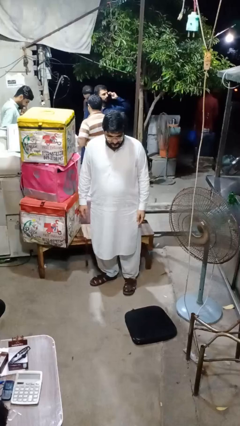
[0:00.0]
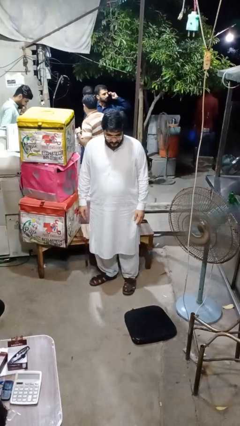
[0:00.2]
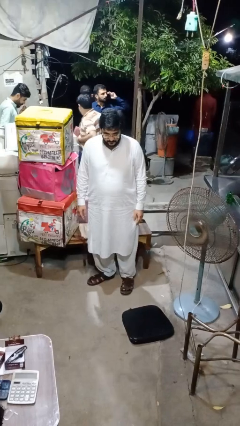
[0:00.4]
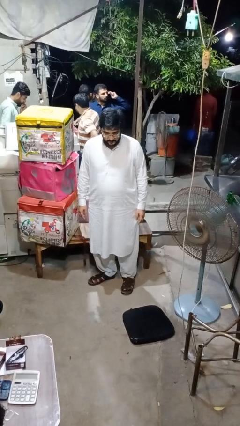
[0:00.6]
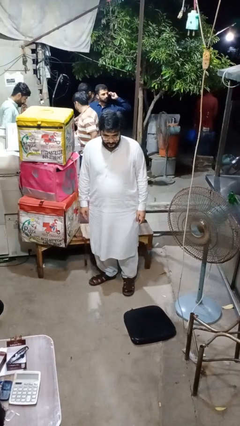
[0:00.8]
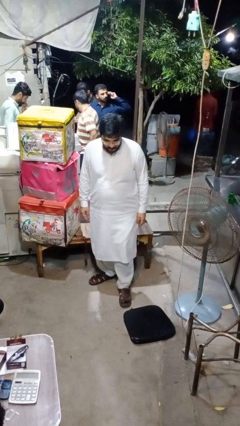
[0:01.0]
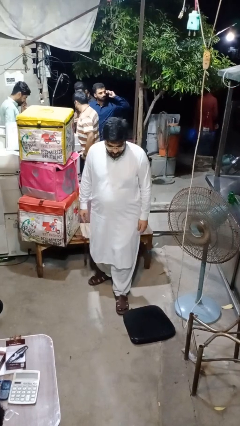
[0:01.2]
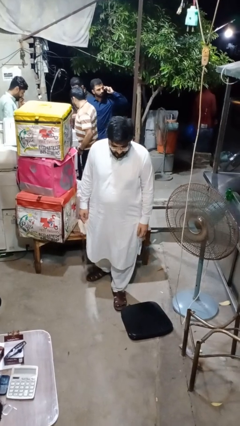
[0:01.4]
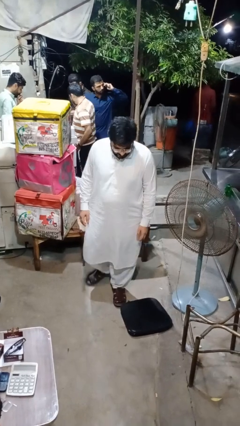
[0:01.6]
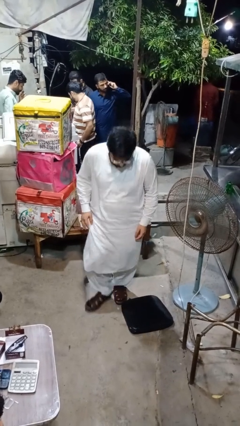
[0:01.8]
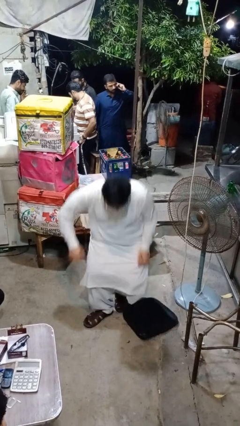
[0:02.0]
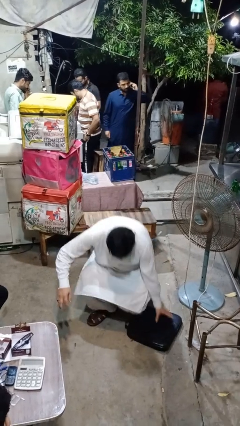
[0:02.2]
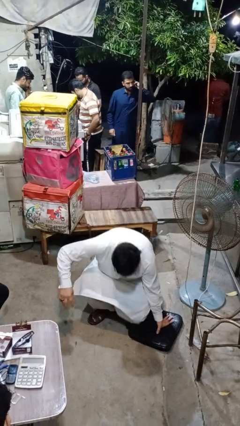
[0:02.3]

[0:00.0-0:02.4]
person trips on object on floor

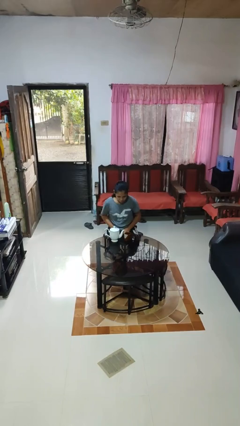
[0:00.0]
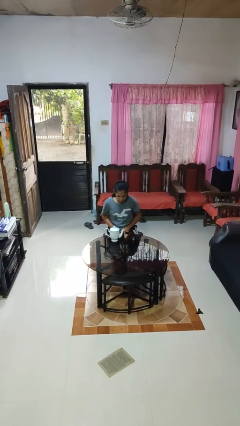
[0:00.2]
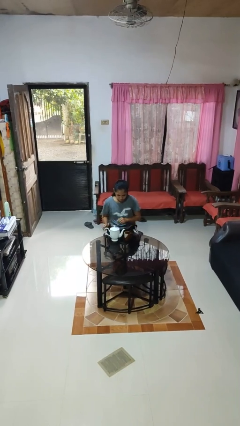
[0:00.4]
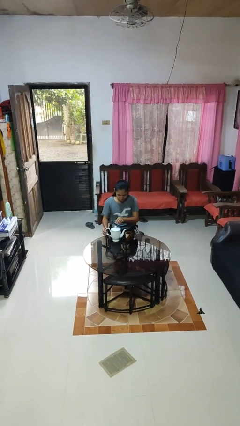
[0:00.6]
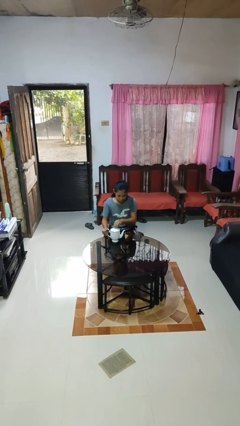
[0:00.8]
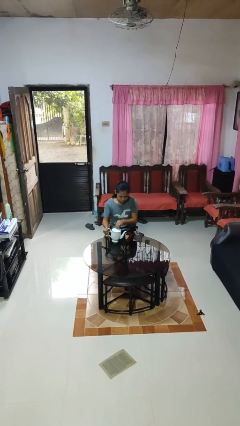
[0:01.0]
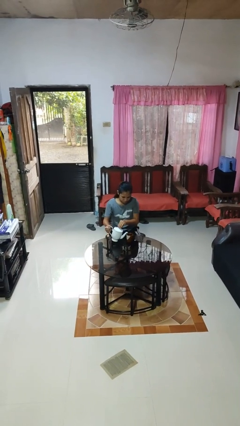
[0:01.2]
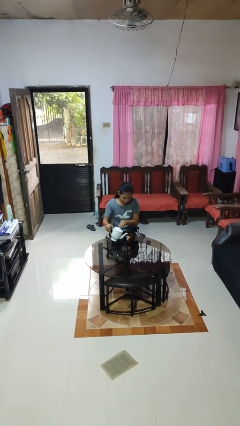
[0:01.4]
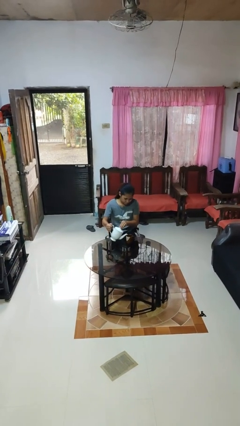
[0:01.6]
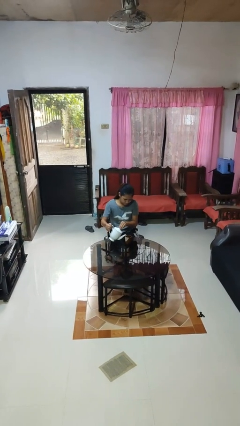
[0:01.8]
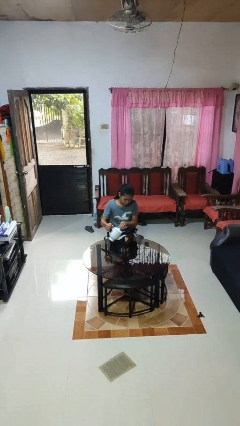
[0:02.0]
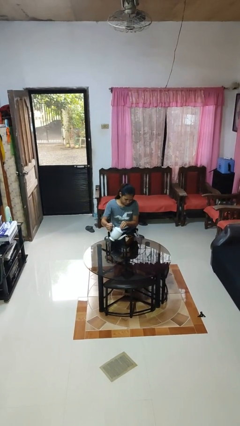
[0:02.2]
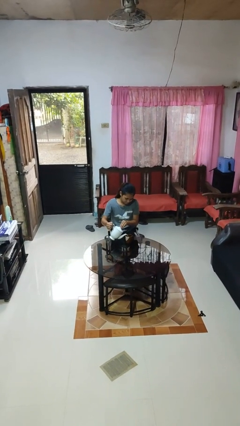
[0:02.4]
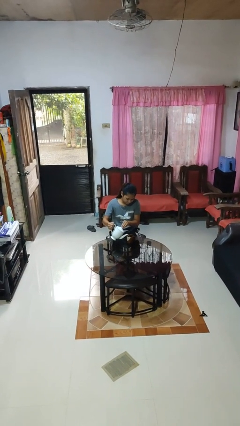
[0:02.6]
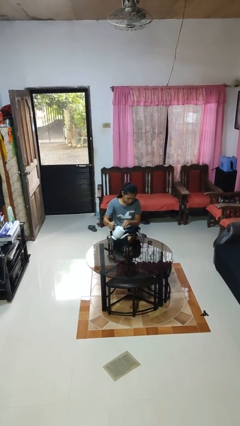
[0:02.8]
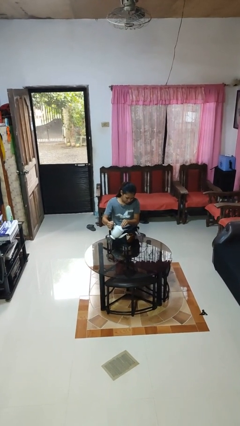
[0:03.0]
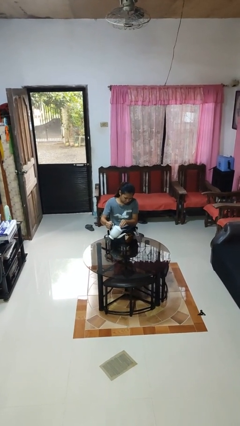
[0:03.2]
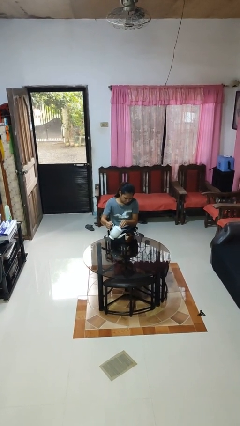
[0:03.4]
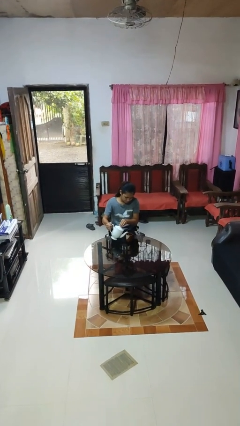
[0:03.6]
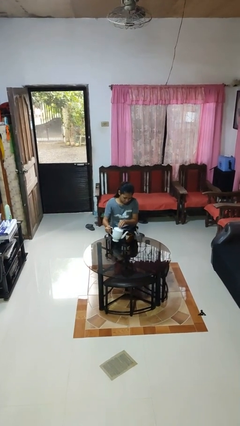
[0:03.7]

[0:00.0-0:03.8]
person pours coffee into mug

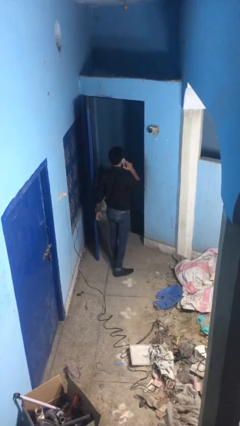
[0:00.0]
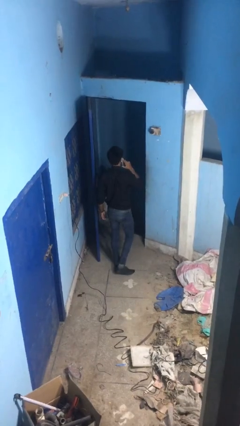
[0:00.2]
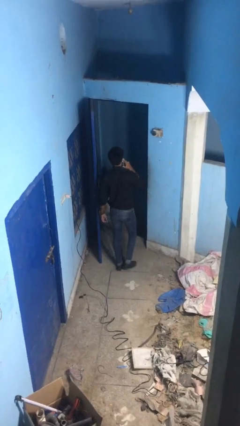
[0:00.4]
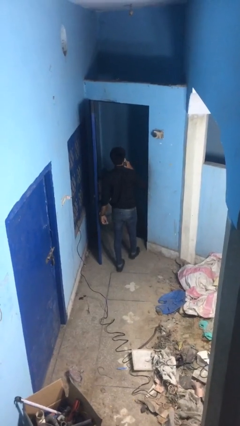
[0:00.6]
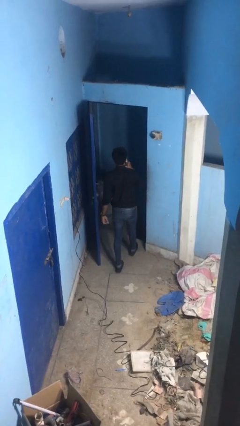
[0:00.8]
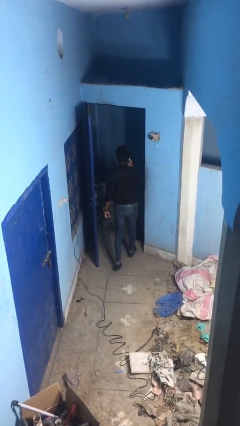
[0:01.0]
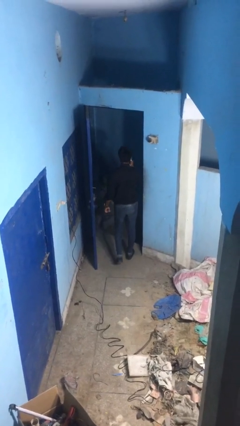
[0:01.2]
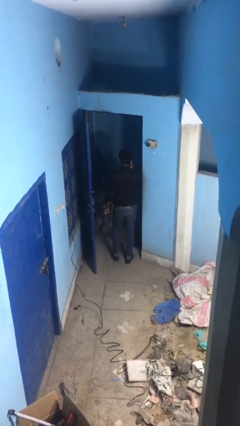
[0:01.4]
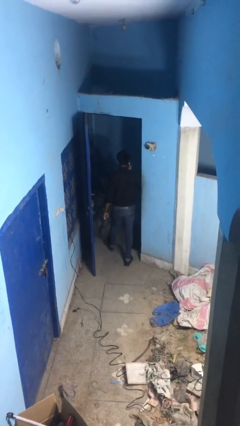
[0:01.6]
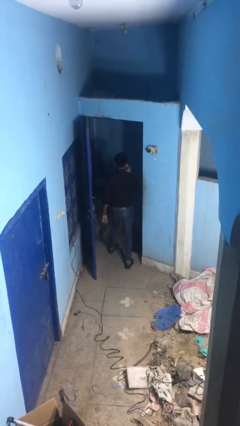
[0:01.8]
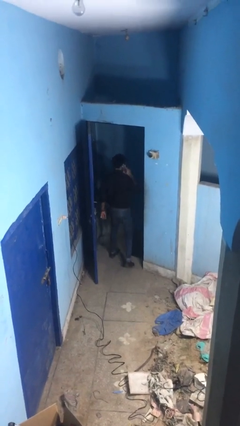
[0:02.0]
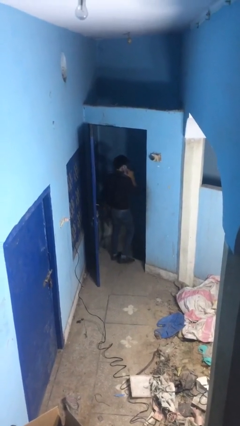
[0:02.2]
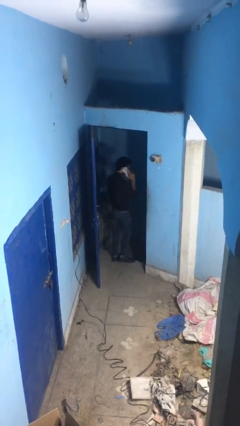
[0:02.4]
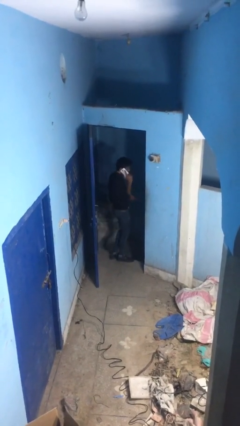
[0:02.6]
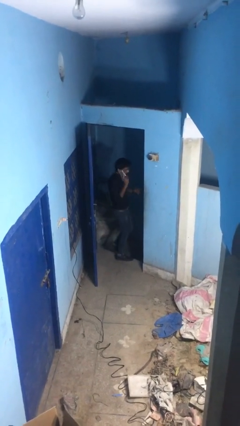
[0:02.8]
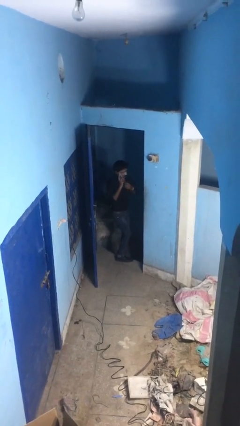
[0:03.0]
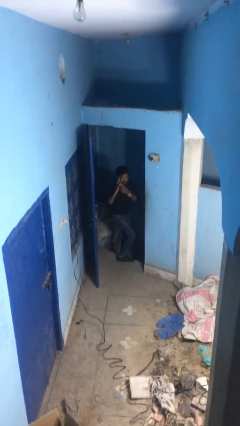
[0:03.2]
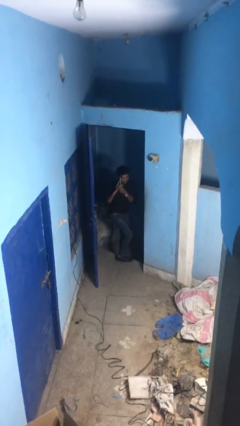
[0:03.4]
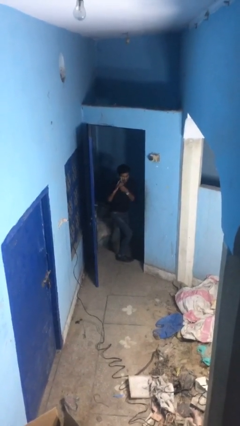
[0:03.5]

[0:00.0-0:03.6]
person exits scene through structure

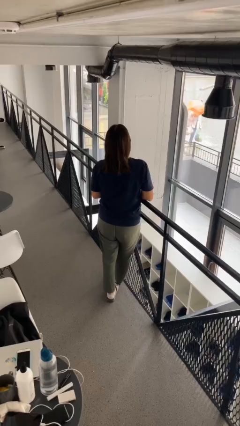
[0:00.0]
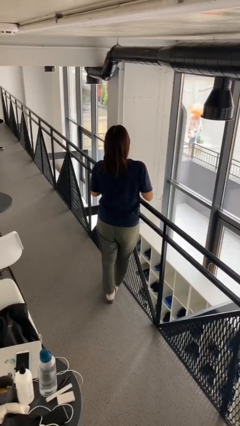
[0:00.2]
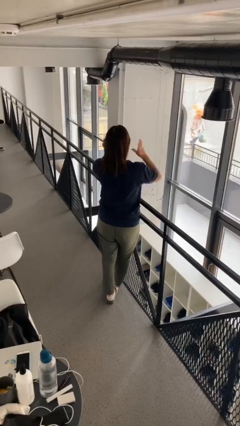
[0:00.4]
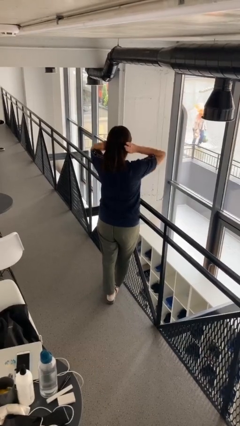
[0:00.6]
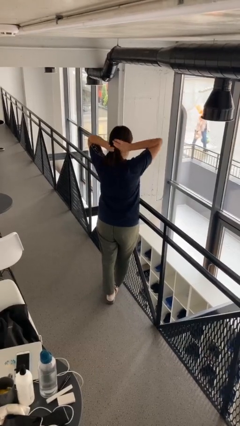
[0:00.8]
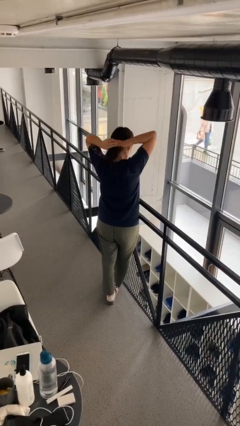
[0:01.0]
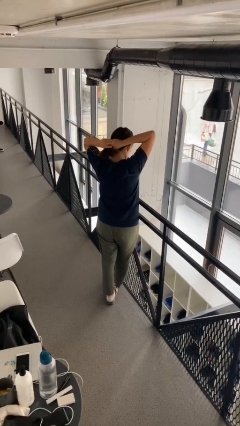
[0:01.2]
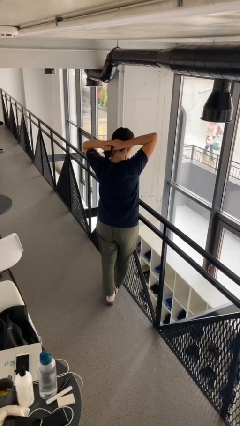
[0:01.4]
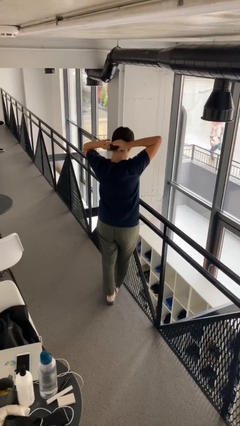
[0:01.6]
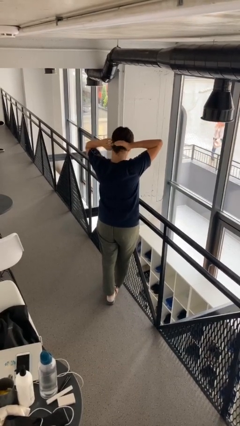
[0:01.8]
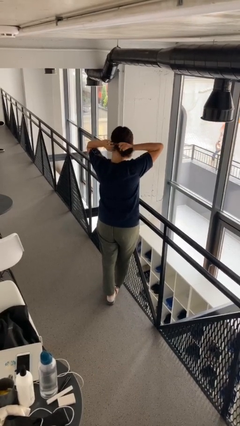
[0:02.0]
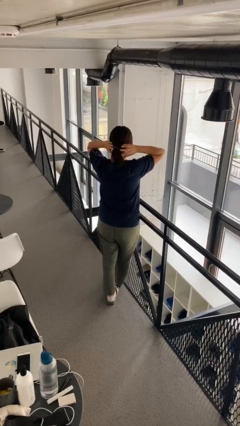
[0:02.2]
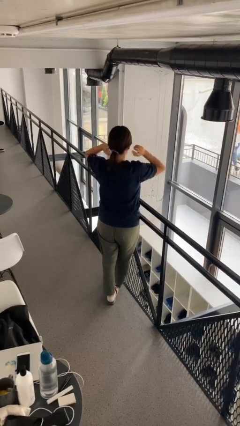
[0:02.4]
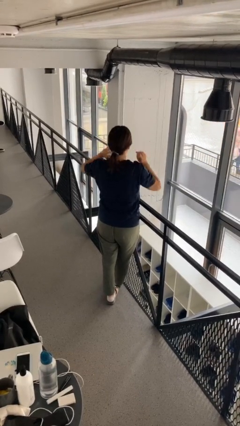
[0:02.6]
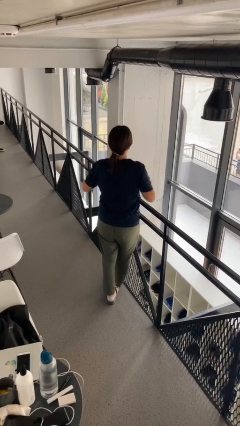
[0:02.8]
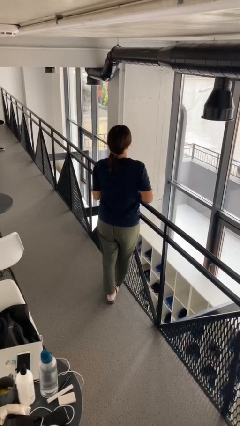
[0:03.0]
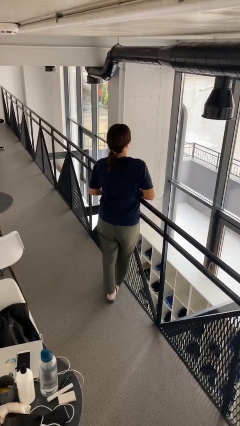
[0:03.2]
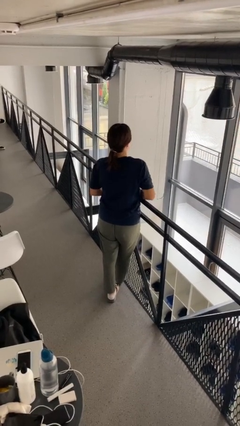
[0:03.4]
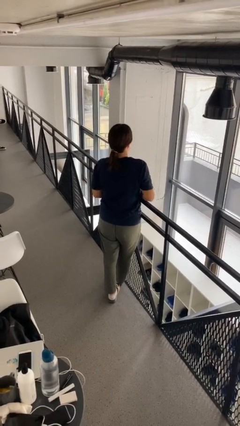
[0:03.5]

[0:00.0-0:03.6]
person puts hair in ponytail

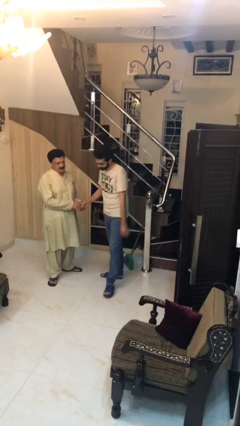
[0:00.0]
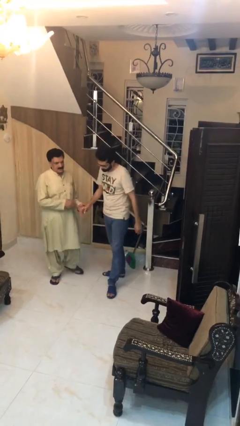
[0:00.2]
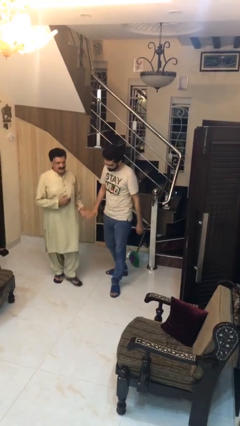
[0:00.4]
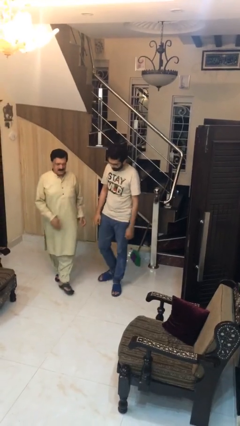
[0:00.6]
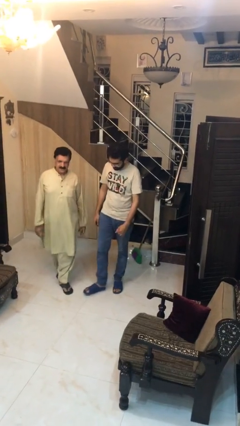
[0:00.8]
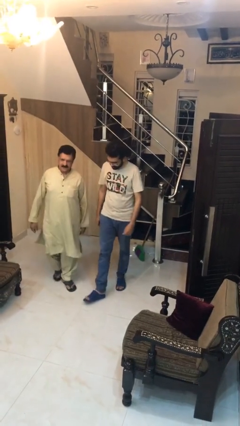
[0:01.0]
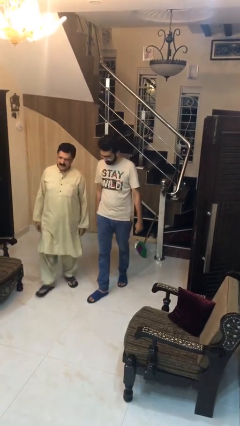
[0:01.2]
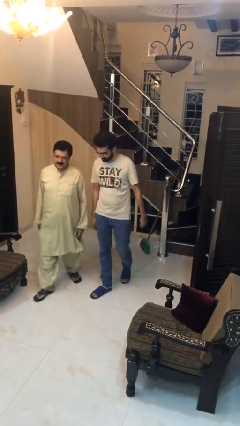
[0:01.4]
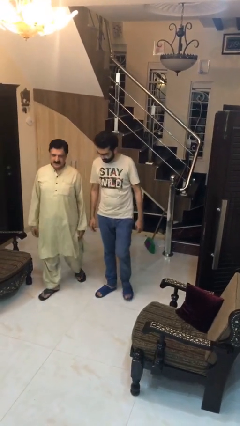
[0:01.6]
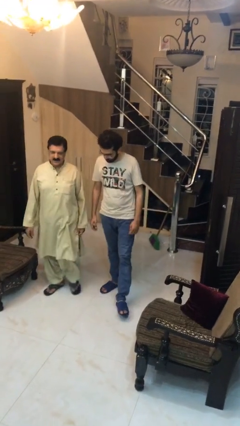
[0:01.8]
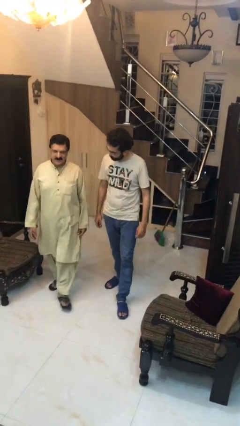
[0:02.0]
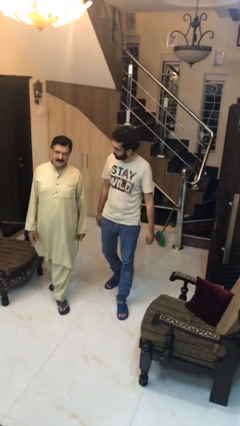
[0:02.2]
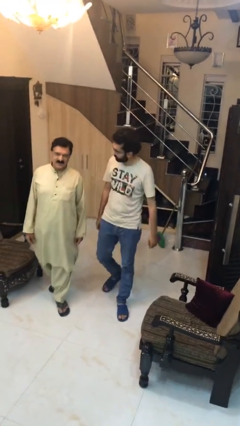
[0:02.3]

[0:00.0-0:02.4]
person talks to person

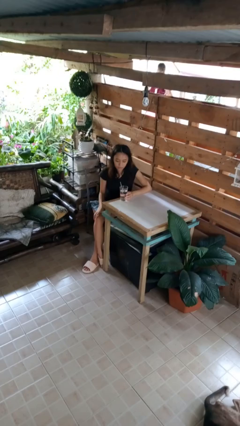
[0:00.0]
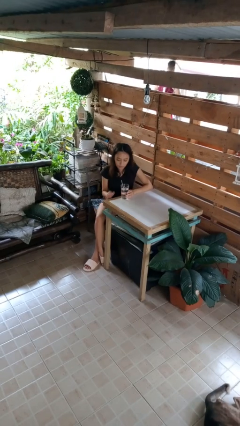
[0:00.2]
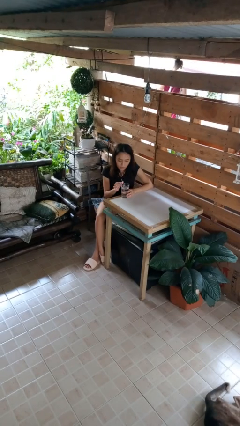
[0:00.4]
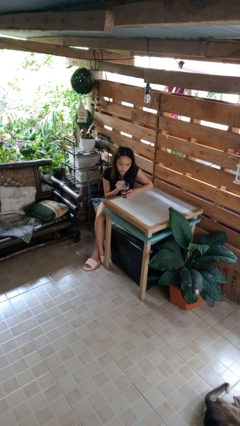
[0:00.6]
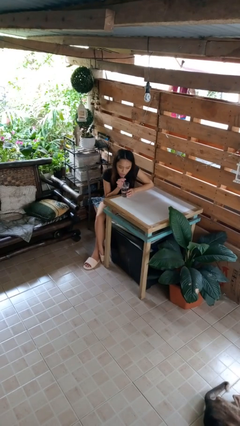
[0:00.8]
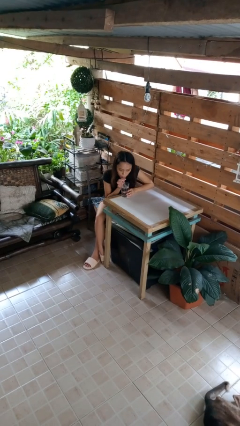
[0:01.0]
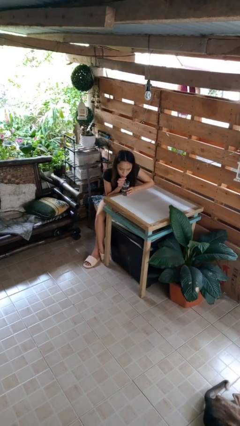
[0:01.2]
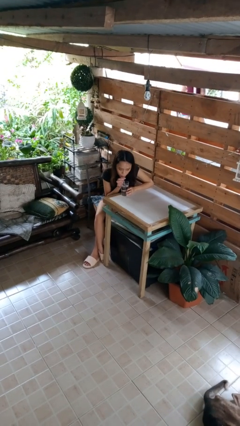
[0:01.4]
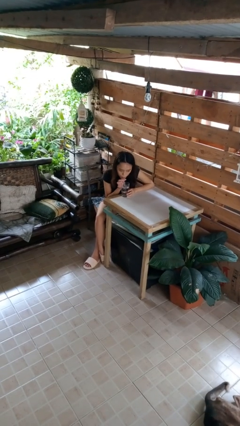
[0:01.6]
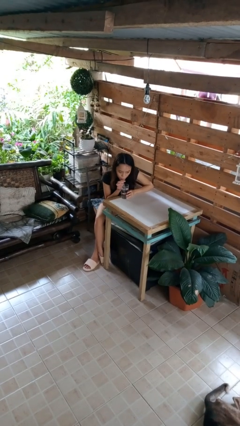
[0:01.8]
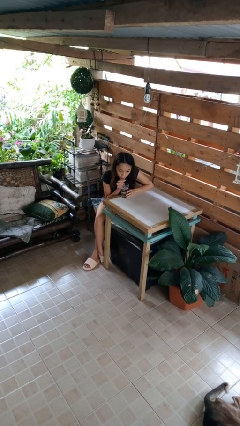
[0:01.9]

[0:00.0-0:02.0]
person drinks from straw
